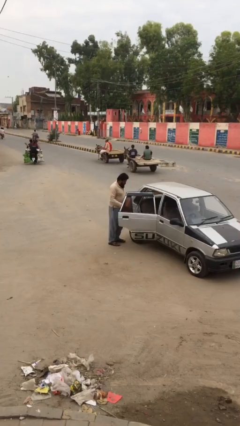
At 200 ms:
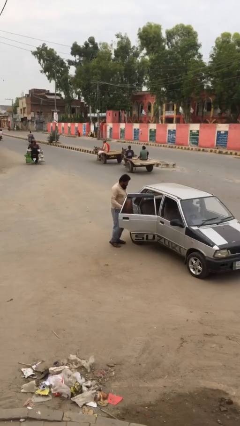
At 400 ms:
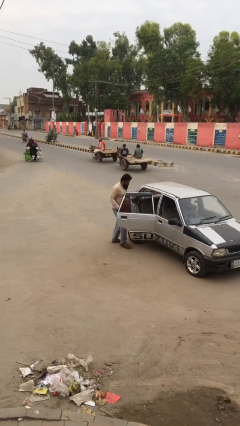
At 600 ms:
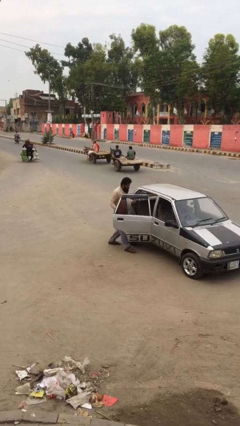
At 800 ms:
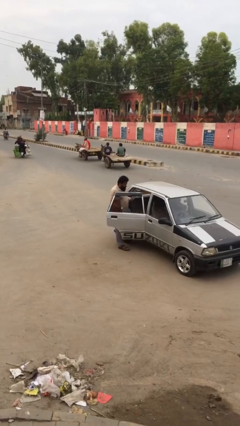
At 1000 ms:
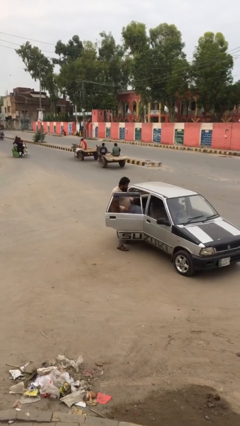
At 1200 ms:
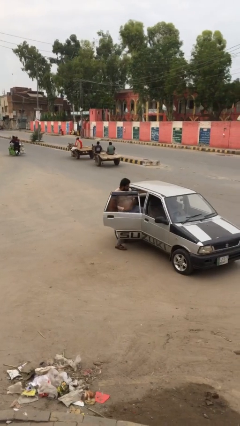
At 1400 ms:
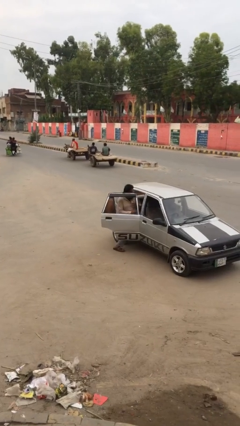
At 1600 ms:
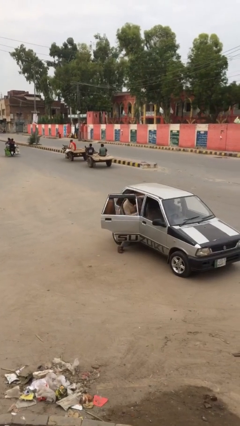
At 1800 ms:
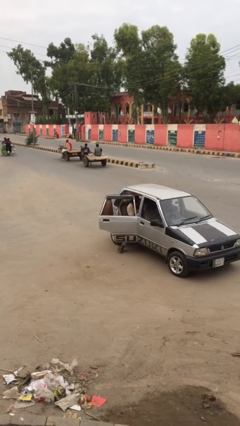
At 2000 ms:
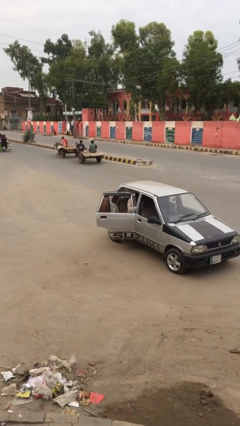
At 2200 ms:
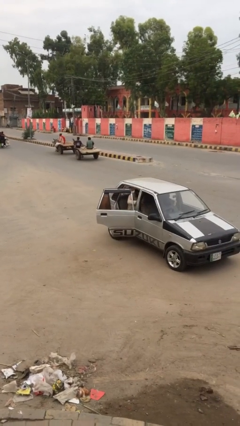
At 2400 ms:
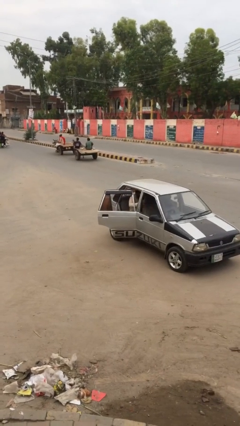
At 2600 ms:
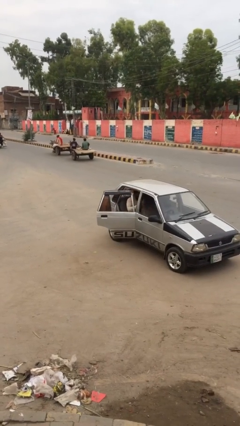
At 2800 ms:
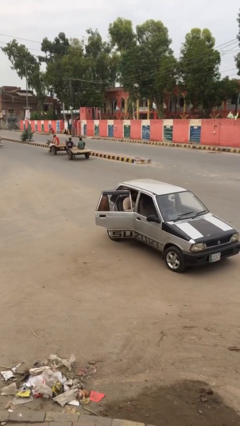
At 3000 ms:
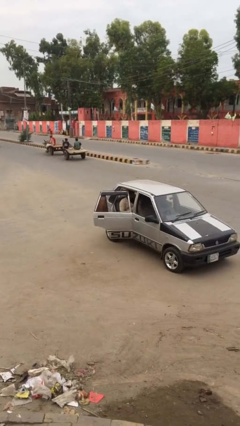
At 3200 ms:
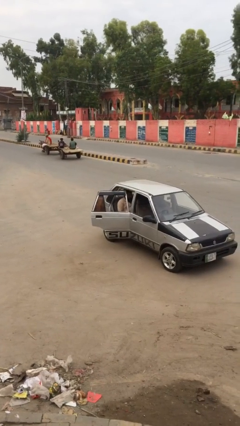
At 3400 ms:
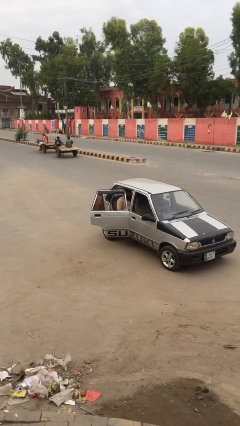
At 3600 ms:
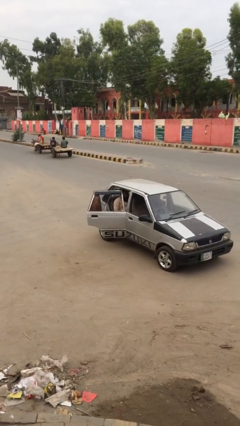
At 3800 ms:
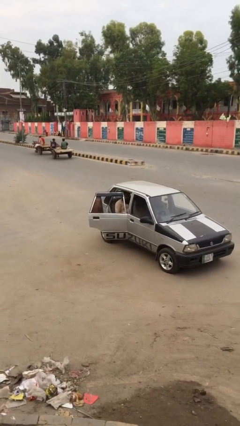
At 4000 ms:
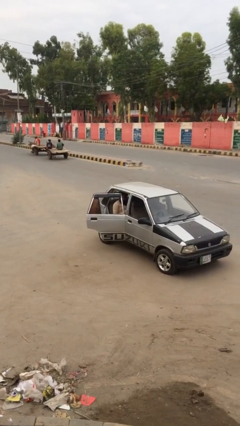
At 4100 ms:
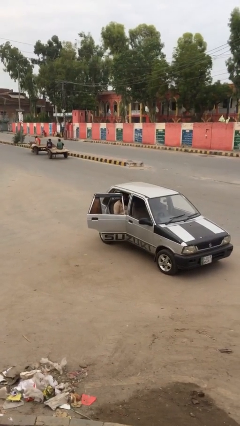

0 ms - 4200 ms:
person enters car

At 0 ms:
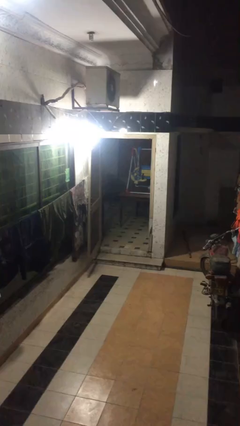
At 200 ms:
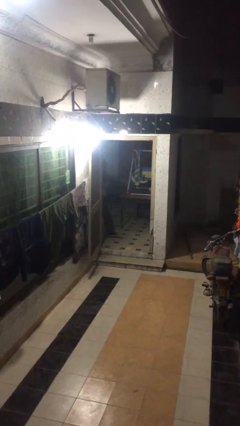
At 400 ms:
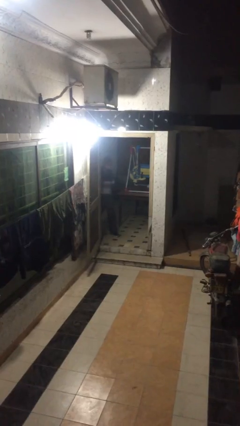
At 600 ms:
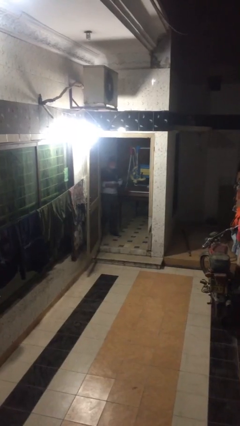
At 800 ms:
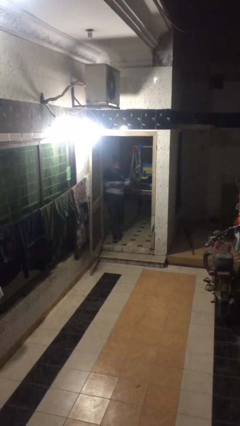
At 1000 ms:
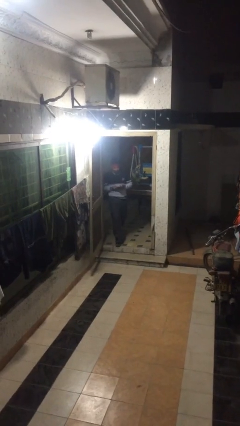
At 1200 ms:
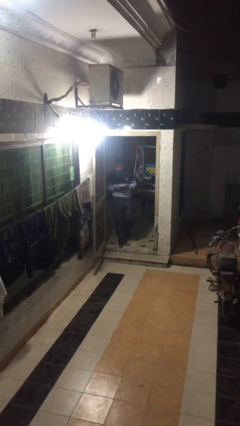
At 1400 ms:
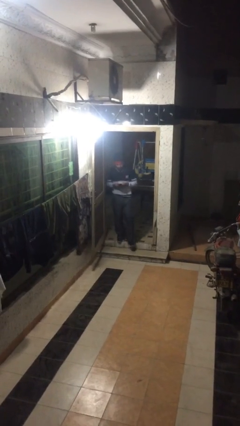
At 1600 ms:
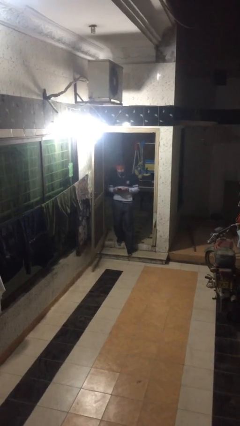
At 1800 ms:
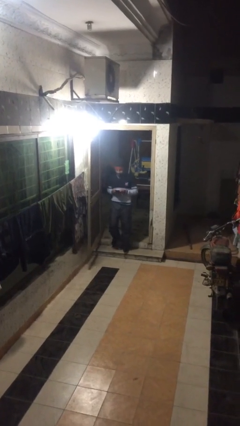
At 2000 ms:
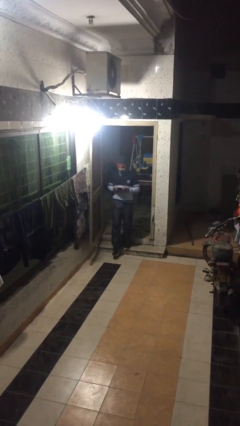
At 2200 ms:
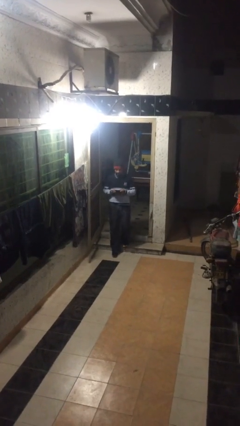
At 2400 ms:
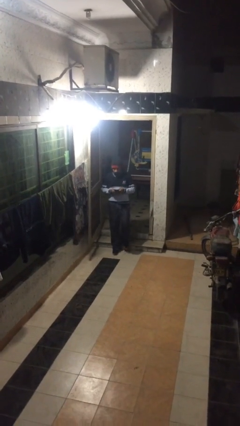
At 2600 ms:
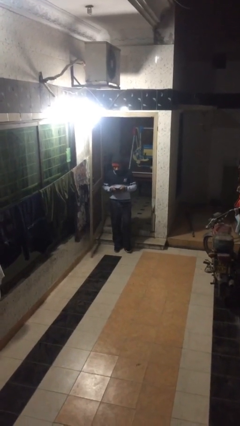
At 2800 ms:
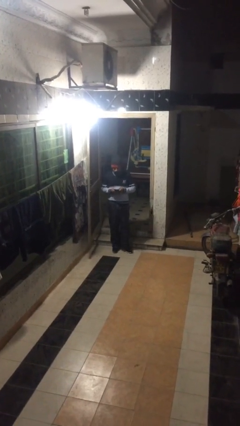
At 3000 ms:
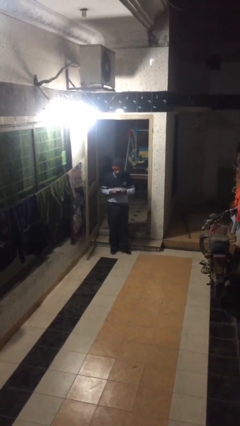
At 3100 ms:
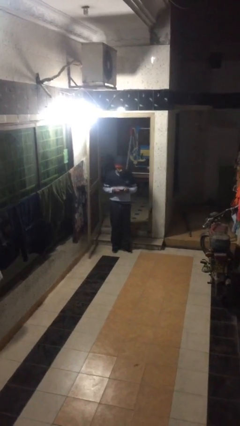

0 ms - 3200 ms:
person enters scene through structure

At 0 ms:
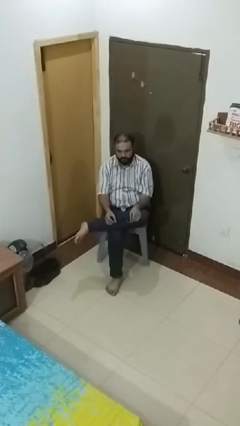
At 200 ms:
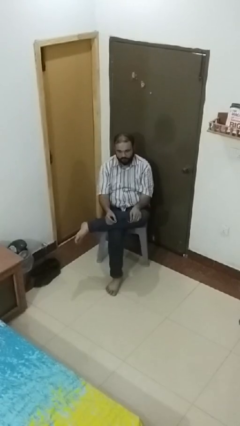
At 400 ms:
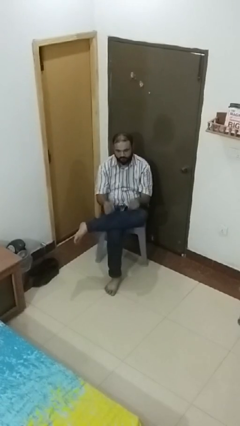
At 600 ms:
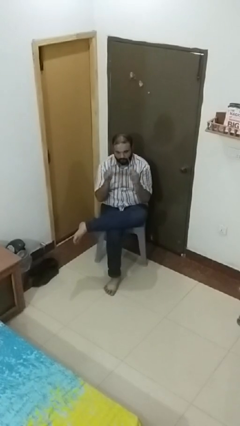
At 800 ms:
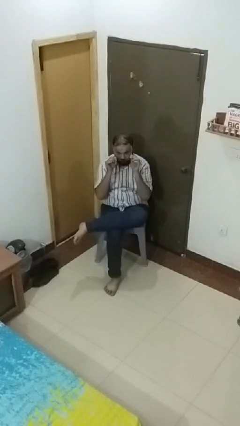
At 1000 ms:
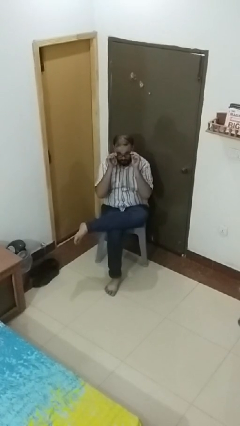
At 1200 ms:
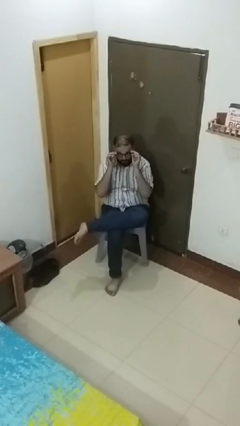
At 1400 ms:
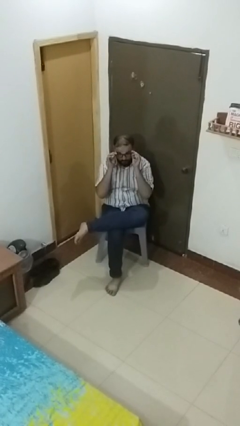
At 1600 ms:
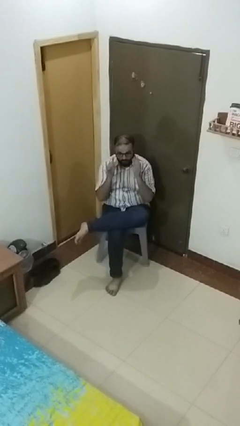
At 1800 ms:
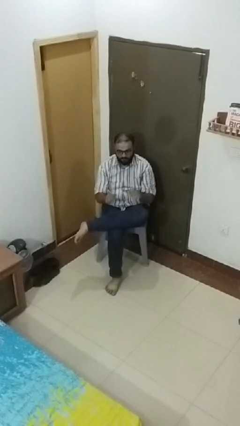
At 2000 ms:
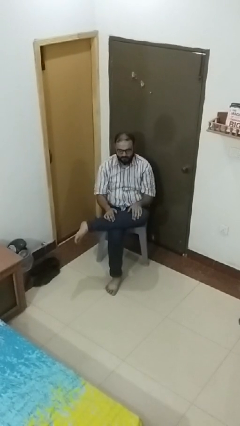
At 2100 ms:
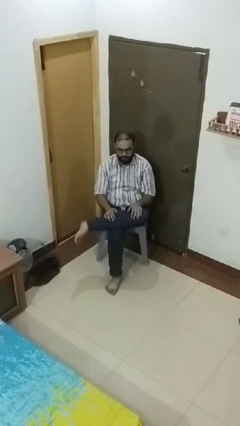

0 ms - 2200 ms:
person puts on glasses

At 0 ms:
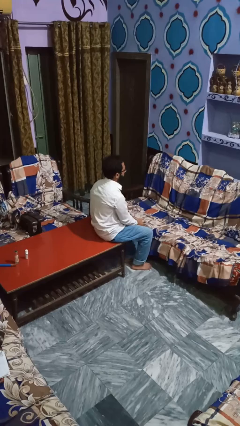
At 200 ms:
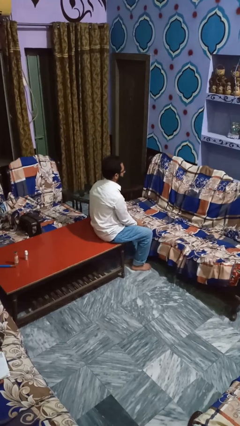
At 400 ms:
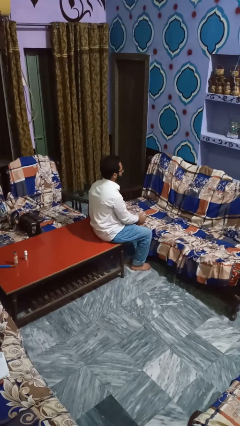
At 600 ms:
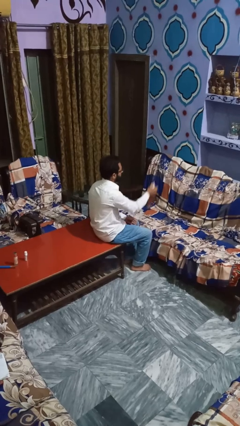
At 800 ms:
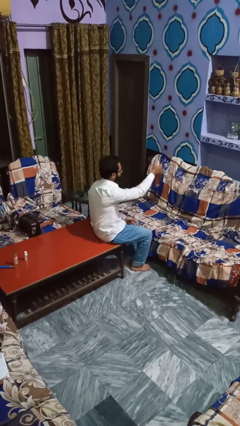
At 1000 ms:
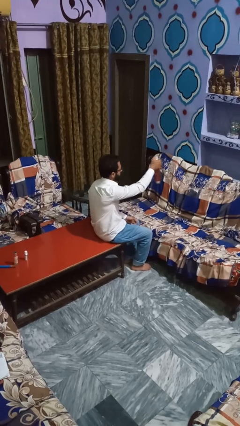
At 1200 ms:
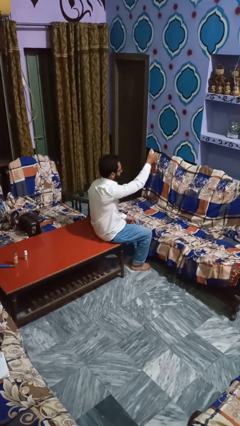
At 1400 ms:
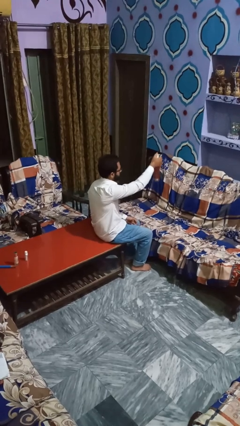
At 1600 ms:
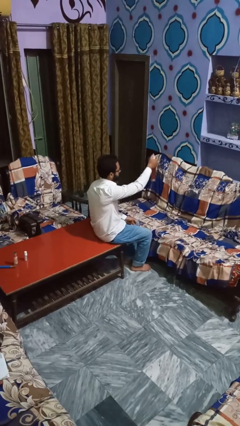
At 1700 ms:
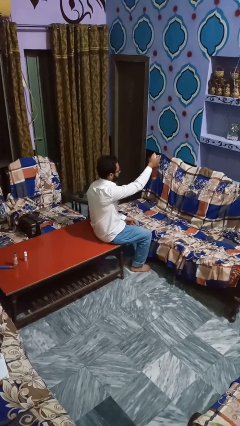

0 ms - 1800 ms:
person sprays from bottle

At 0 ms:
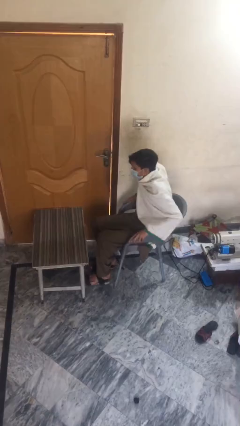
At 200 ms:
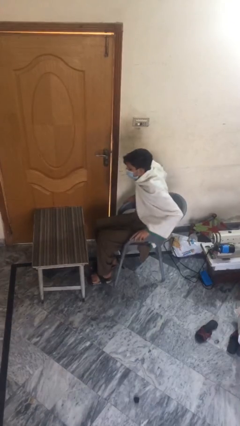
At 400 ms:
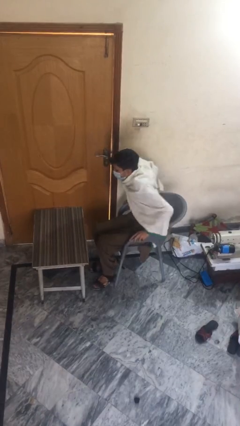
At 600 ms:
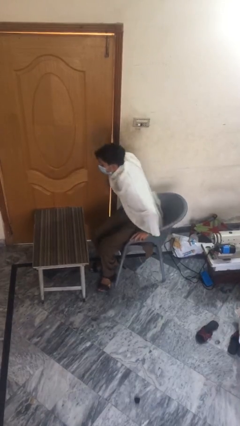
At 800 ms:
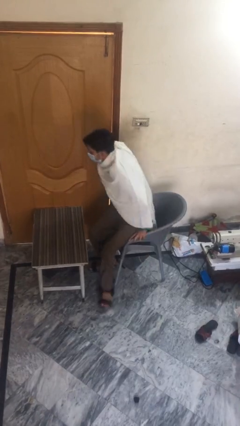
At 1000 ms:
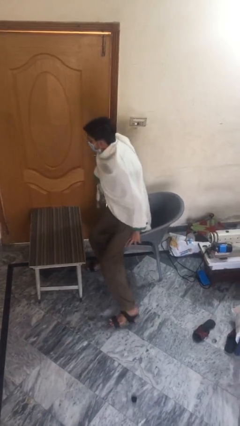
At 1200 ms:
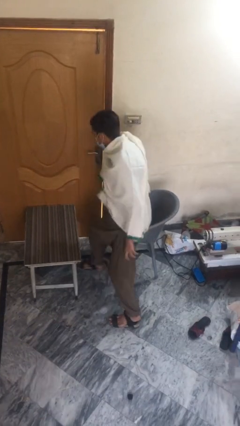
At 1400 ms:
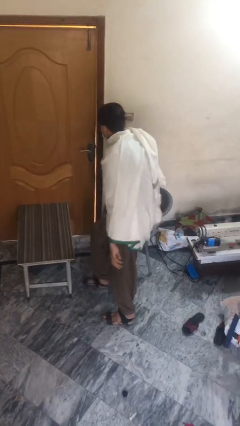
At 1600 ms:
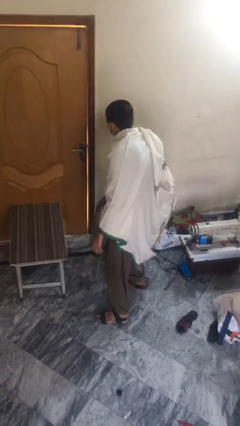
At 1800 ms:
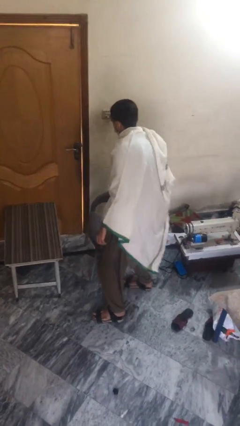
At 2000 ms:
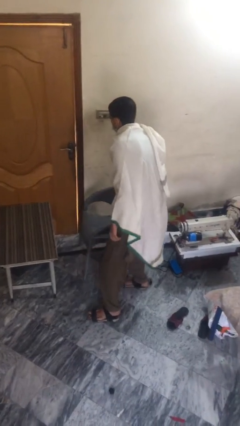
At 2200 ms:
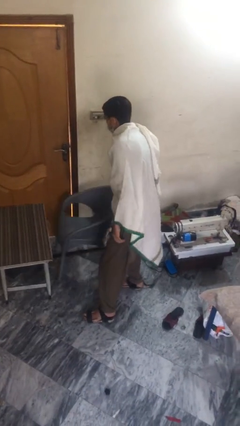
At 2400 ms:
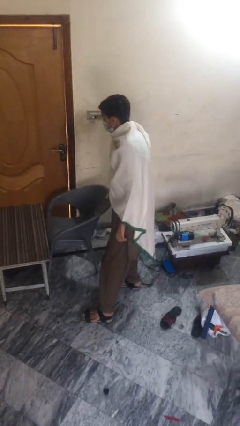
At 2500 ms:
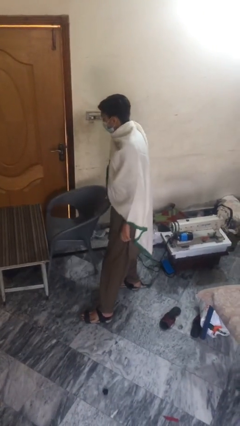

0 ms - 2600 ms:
person stands up

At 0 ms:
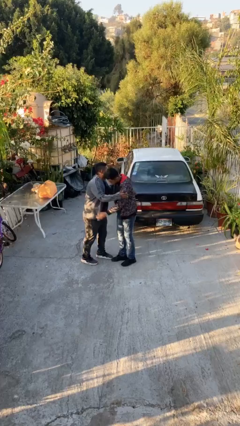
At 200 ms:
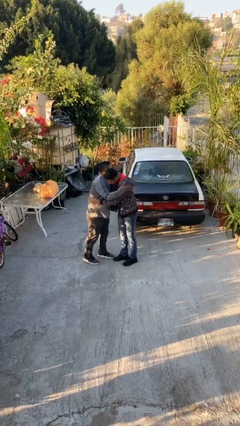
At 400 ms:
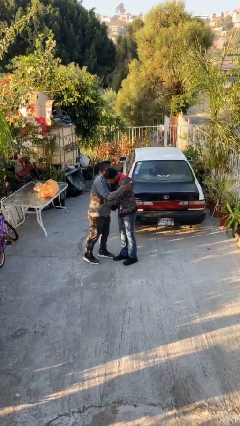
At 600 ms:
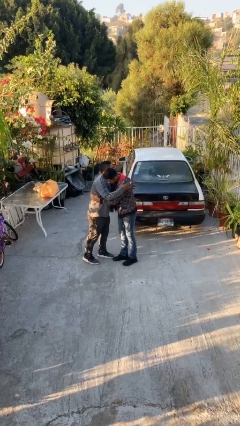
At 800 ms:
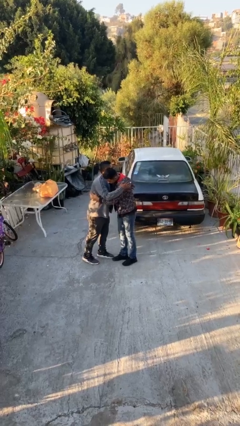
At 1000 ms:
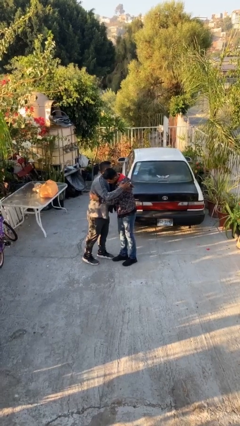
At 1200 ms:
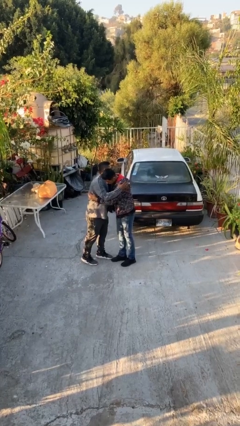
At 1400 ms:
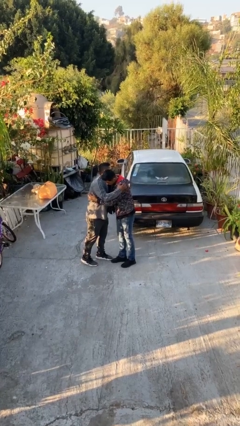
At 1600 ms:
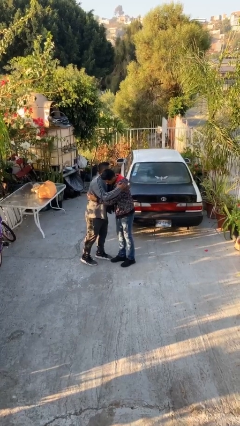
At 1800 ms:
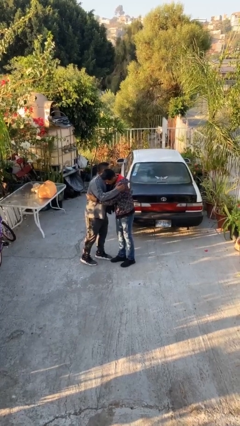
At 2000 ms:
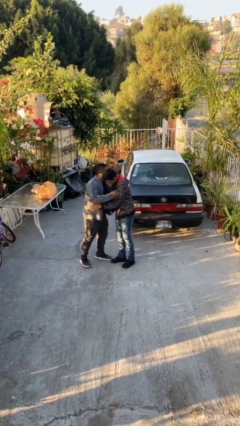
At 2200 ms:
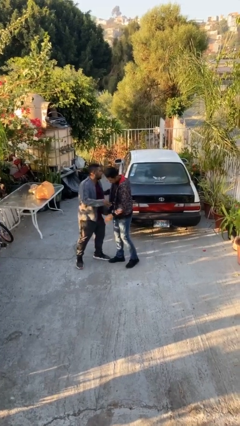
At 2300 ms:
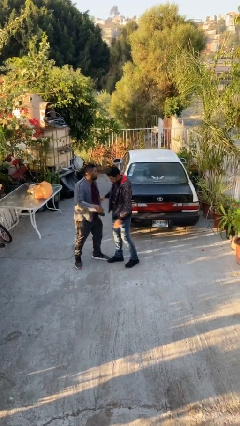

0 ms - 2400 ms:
person embraces person

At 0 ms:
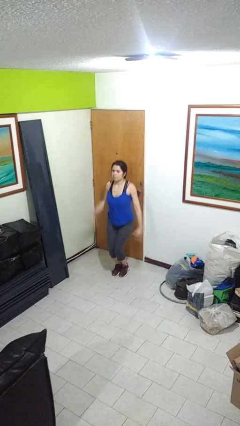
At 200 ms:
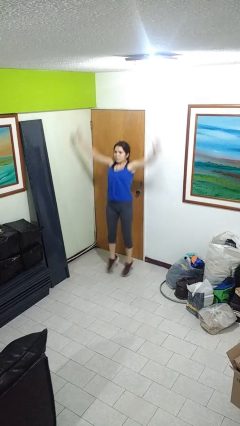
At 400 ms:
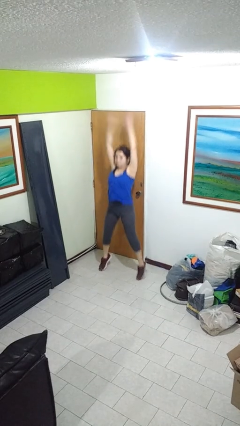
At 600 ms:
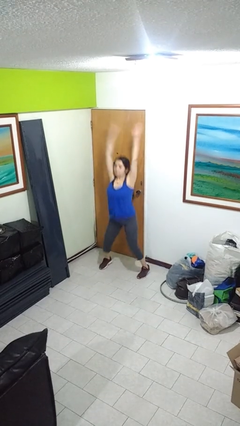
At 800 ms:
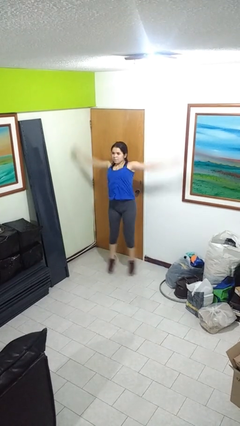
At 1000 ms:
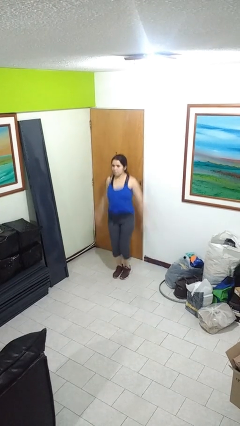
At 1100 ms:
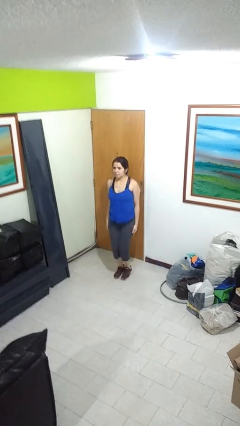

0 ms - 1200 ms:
person exercises with jumping jacks
